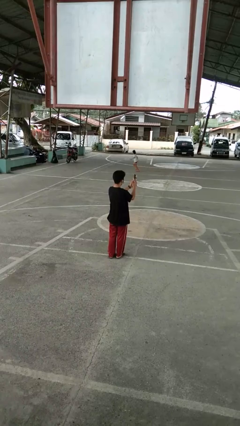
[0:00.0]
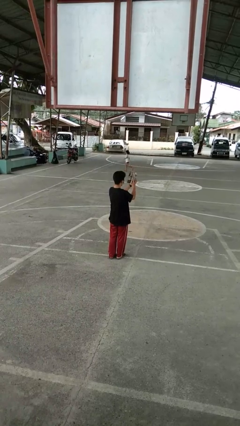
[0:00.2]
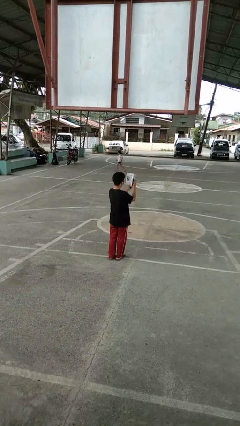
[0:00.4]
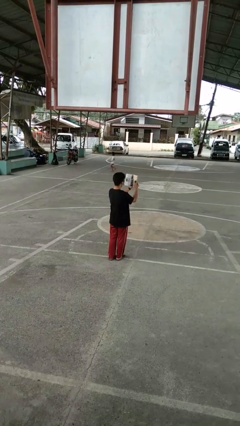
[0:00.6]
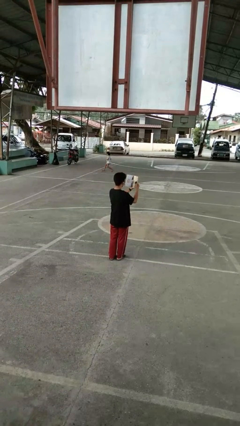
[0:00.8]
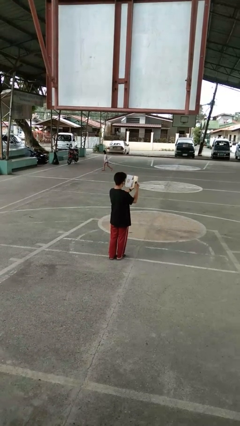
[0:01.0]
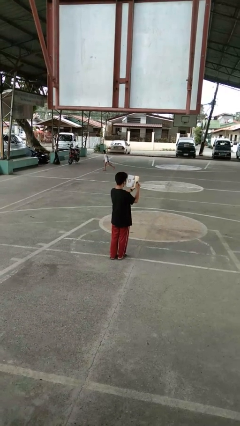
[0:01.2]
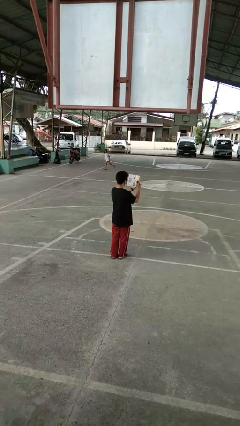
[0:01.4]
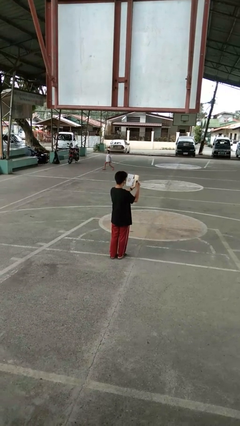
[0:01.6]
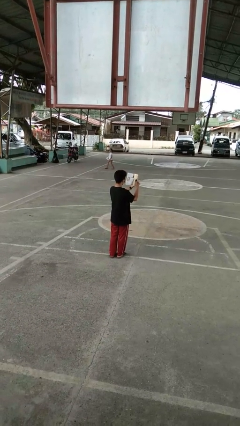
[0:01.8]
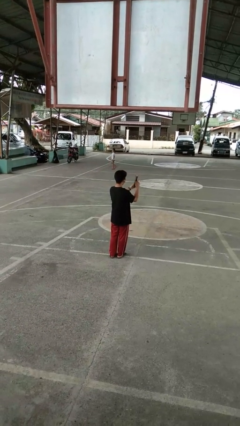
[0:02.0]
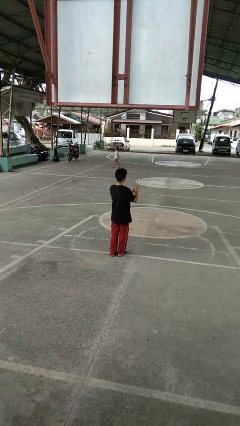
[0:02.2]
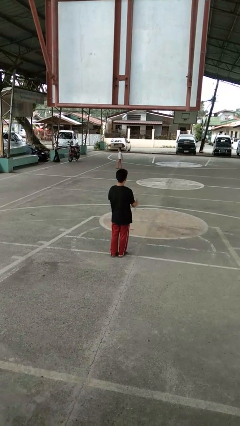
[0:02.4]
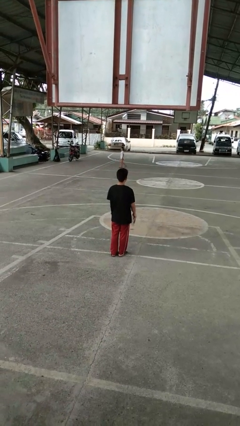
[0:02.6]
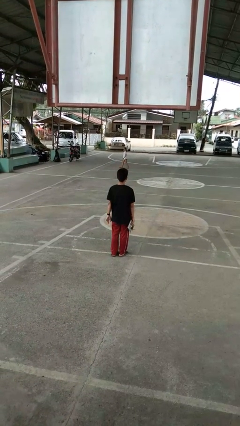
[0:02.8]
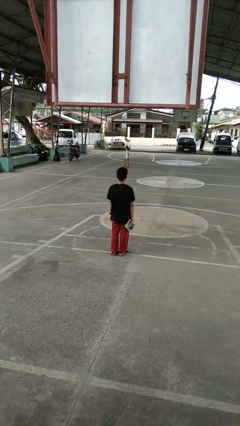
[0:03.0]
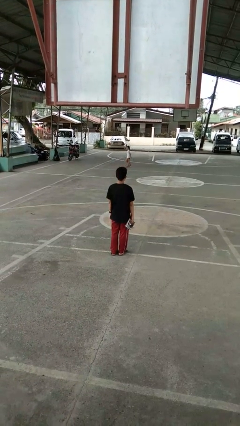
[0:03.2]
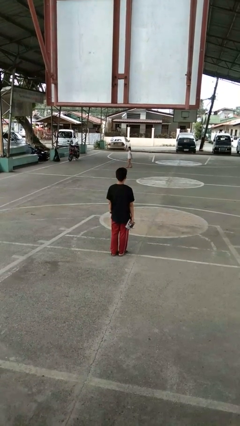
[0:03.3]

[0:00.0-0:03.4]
person reads magazine

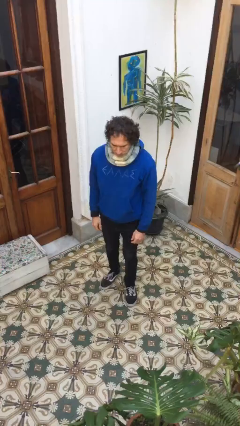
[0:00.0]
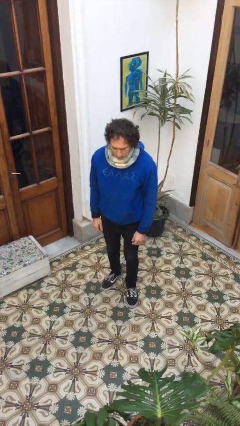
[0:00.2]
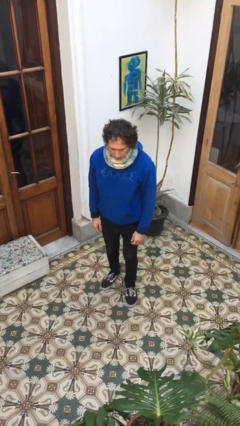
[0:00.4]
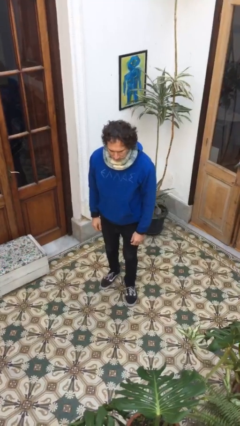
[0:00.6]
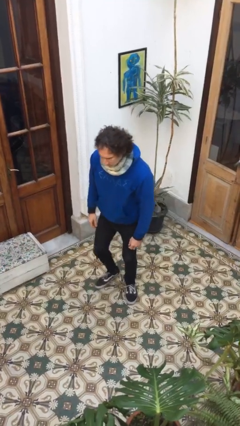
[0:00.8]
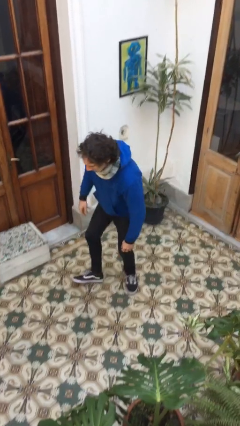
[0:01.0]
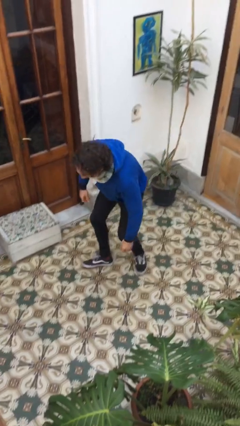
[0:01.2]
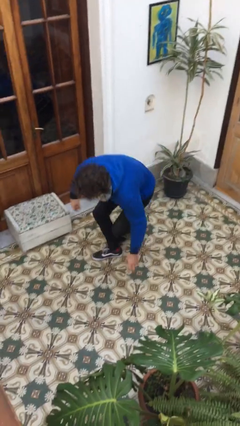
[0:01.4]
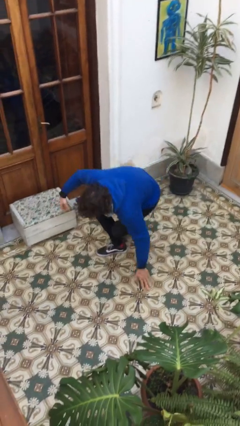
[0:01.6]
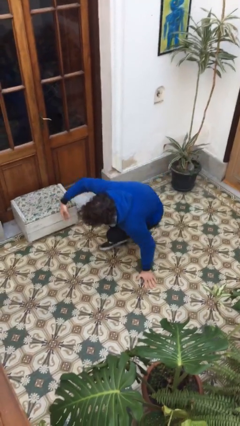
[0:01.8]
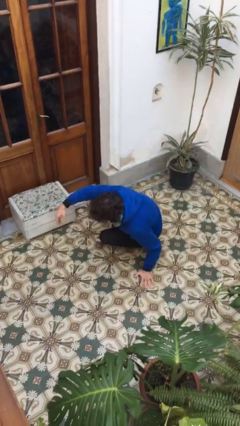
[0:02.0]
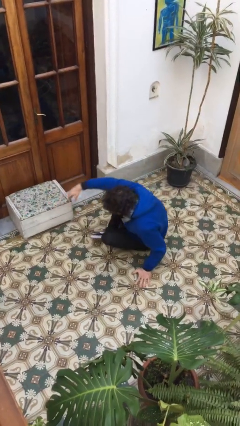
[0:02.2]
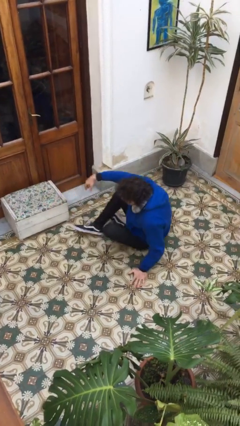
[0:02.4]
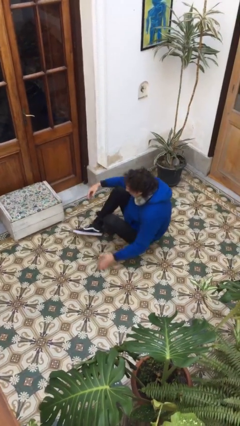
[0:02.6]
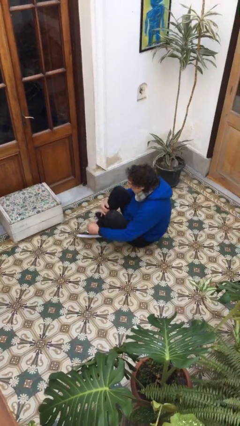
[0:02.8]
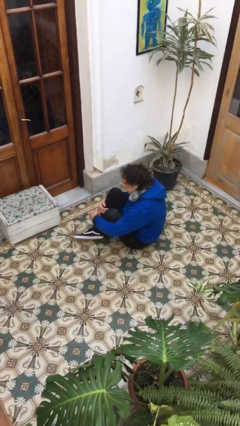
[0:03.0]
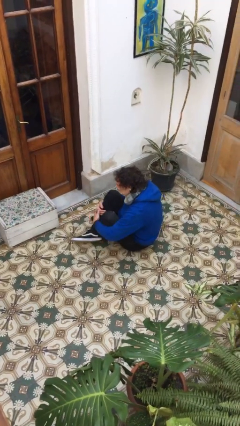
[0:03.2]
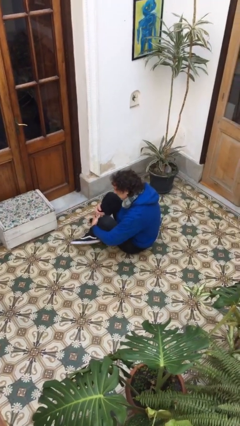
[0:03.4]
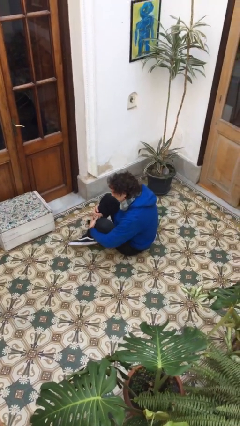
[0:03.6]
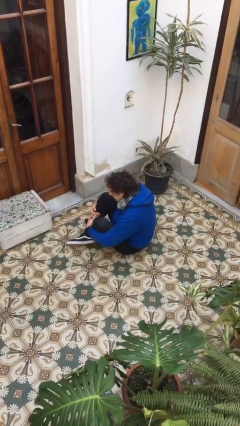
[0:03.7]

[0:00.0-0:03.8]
person sits crisscross

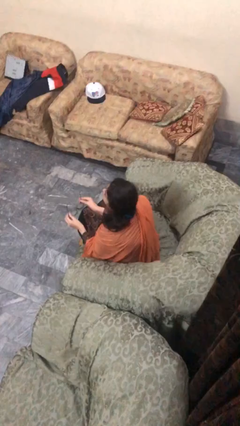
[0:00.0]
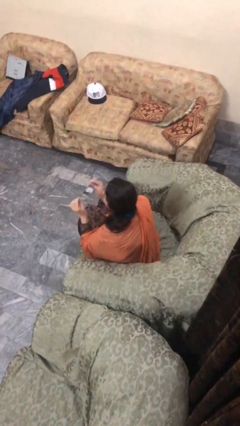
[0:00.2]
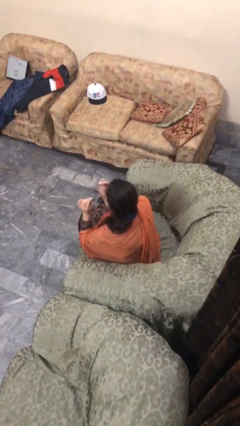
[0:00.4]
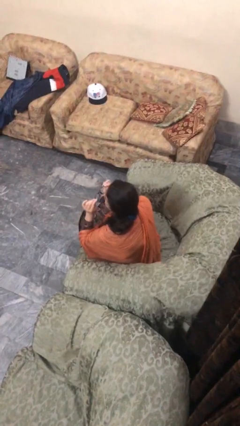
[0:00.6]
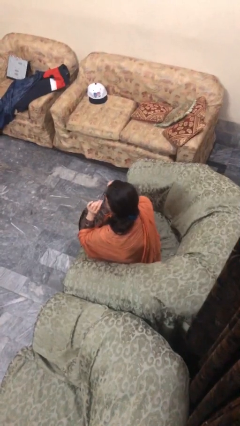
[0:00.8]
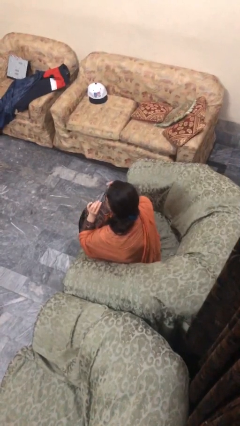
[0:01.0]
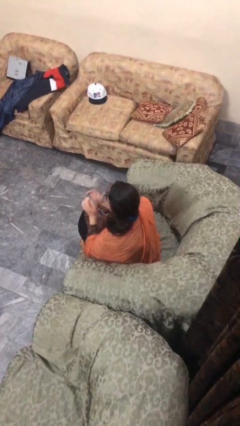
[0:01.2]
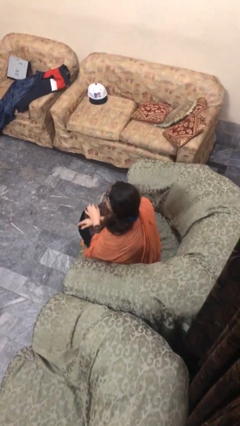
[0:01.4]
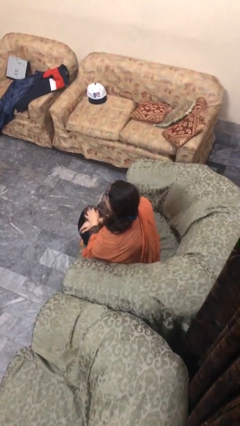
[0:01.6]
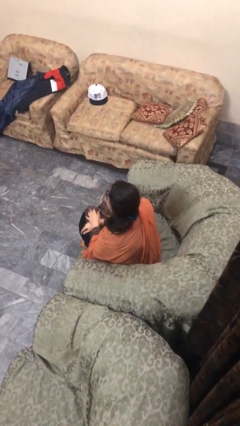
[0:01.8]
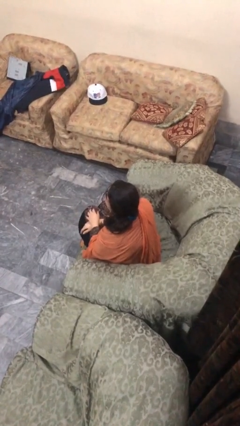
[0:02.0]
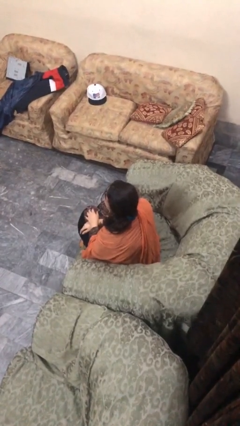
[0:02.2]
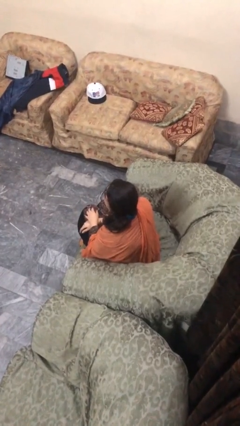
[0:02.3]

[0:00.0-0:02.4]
person puts on glasses

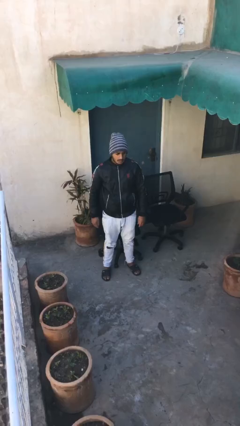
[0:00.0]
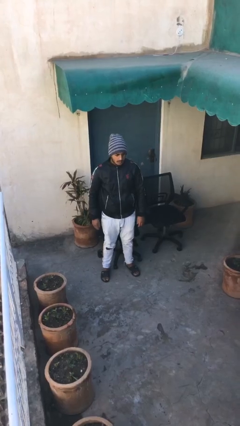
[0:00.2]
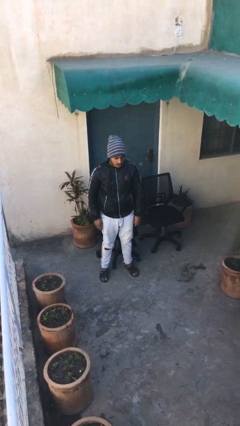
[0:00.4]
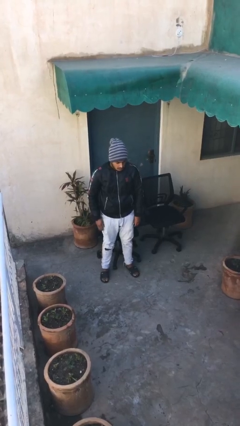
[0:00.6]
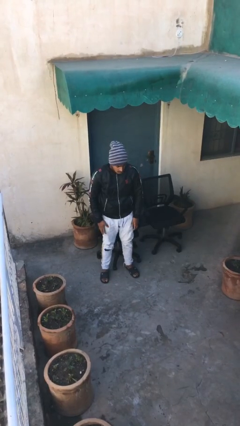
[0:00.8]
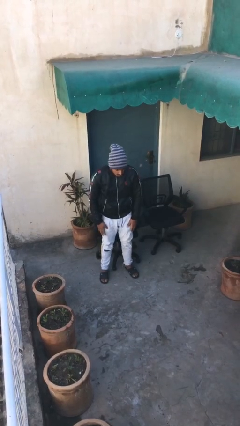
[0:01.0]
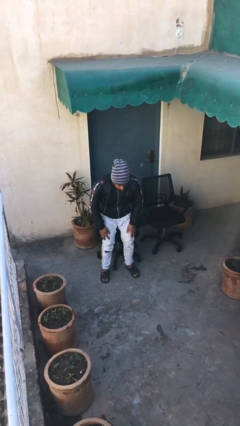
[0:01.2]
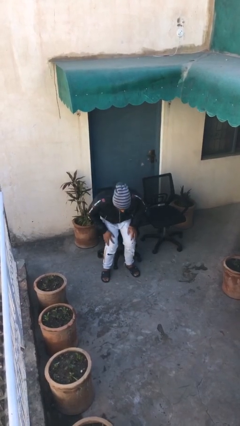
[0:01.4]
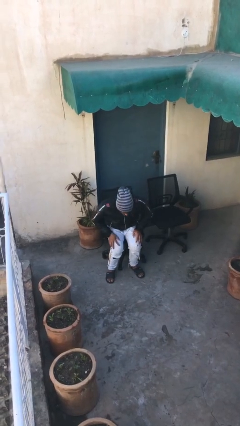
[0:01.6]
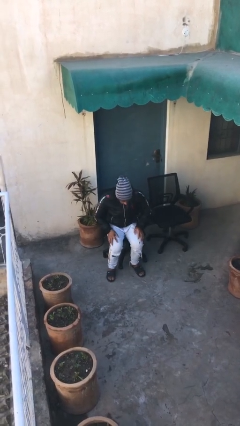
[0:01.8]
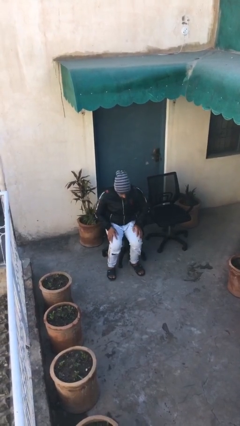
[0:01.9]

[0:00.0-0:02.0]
person sits down

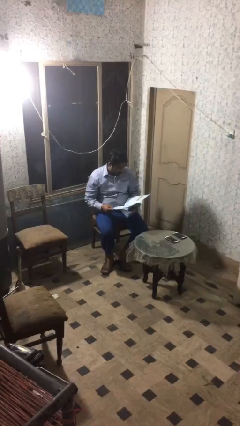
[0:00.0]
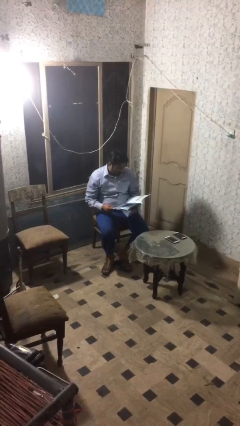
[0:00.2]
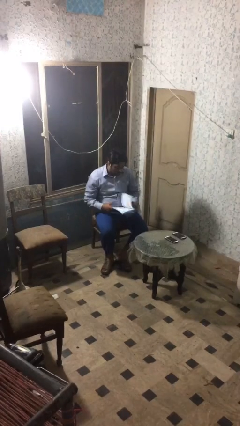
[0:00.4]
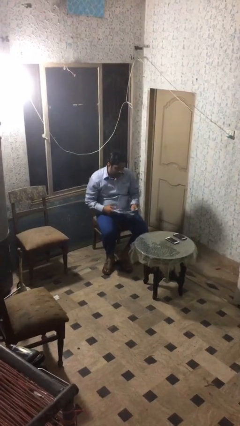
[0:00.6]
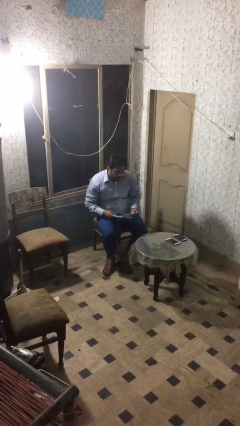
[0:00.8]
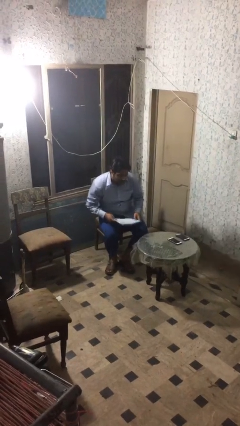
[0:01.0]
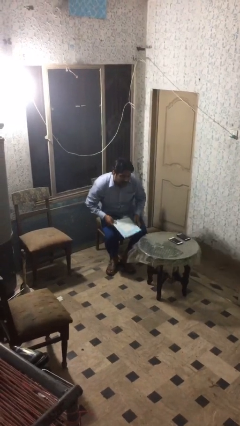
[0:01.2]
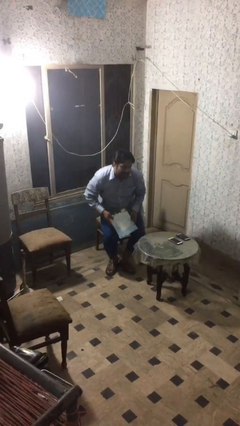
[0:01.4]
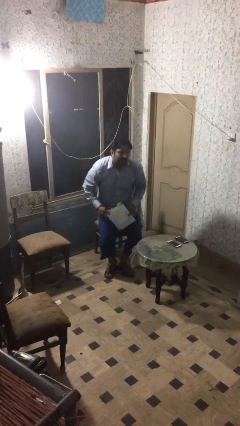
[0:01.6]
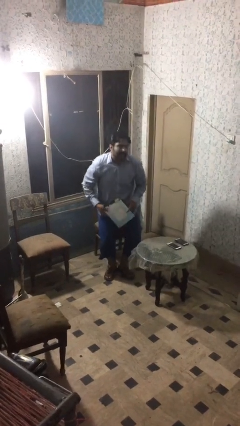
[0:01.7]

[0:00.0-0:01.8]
person stands up

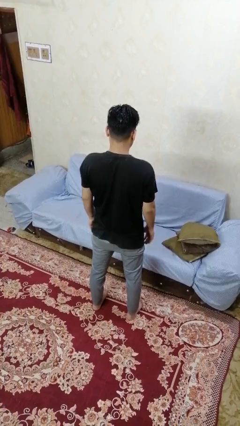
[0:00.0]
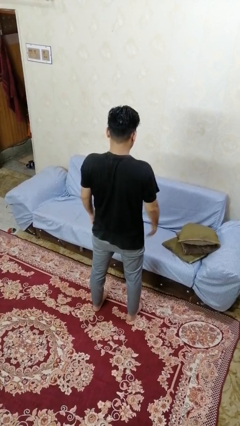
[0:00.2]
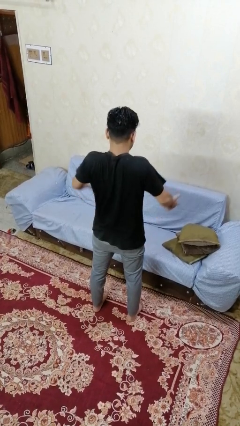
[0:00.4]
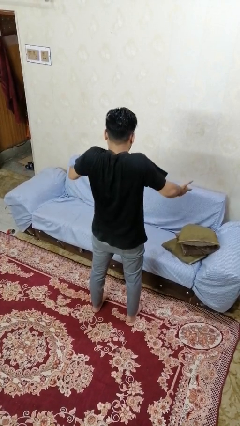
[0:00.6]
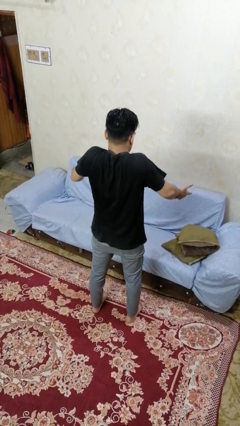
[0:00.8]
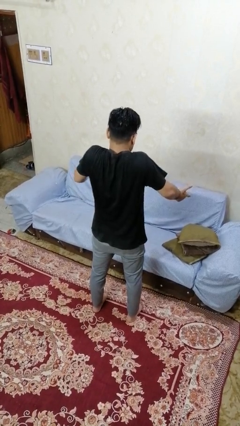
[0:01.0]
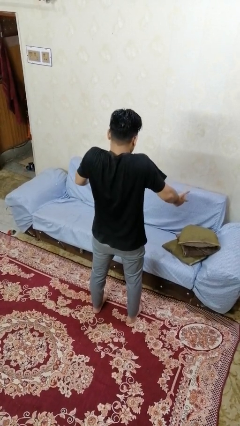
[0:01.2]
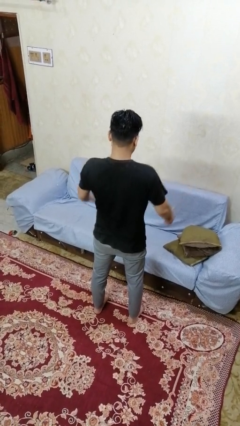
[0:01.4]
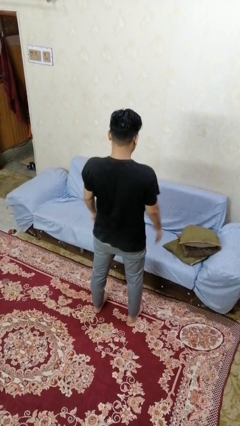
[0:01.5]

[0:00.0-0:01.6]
person shrugs

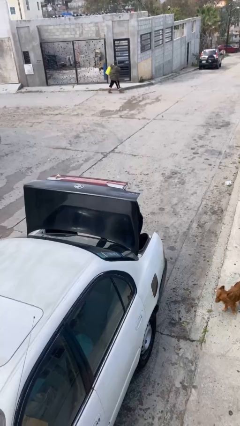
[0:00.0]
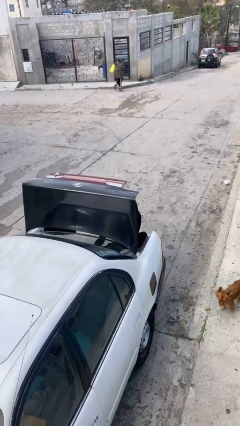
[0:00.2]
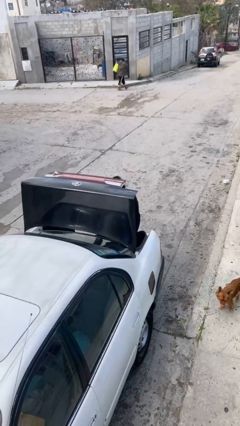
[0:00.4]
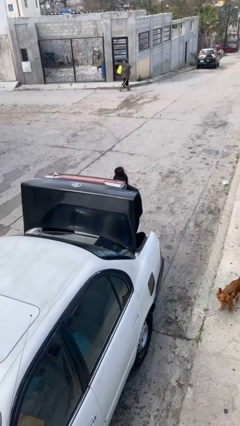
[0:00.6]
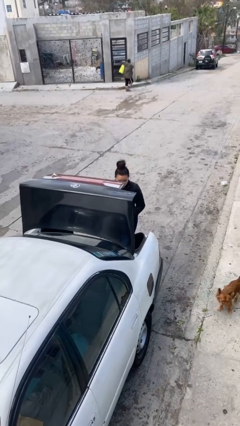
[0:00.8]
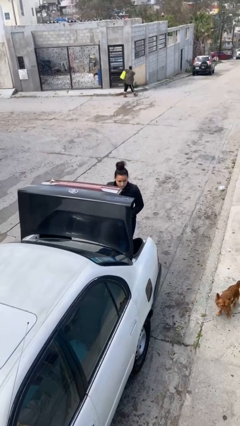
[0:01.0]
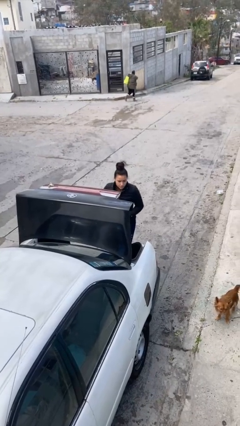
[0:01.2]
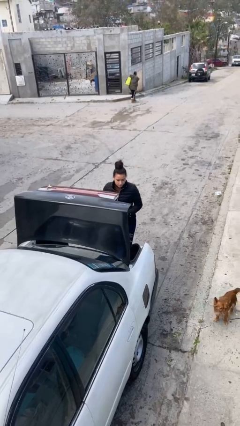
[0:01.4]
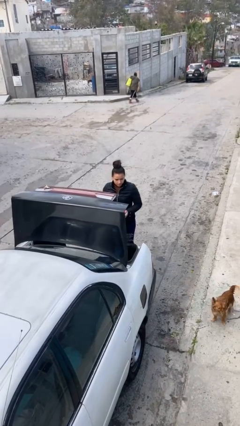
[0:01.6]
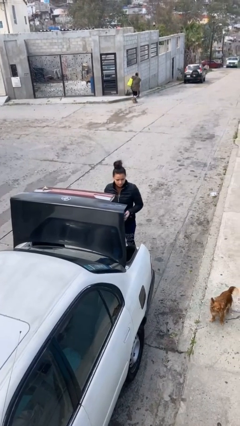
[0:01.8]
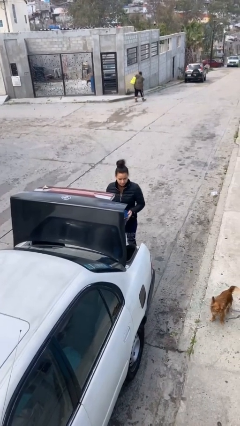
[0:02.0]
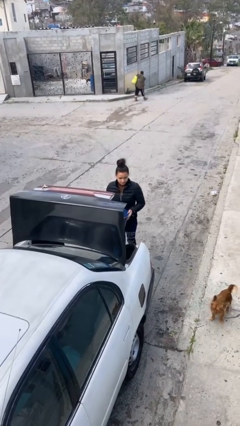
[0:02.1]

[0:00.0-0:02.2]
person unloads car

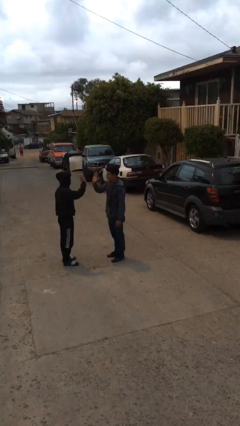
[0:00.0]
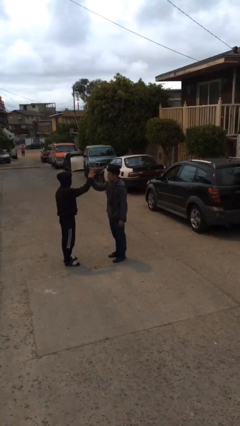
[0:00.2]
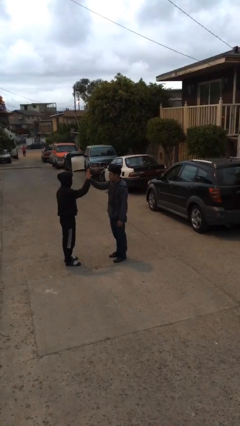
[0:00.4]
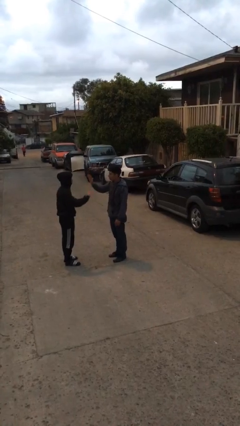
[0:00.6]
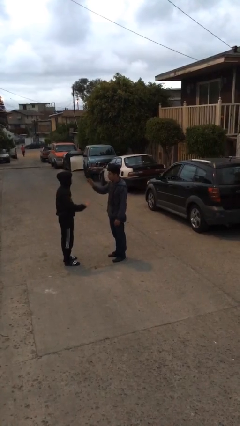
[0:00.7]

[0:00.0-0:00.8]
person highfives hand
